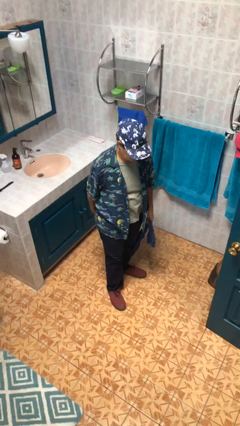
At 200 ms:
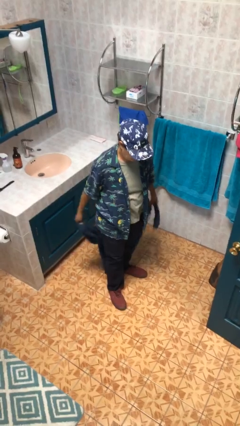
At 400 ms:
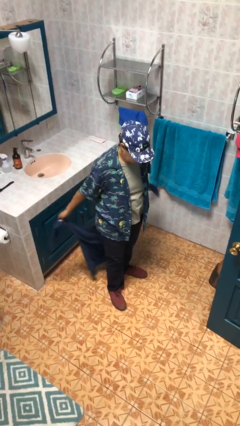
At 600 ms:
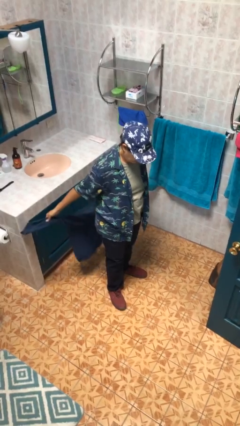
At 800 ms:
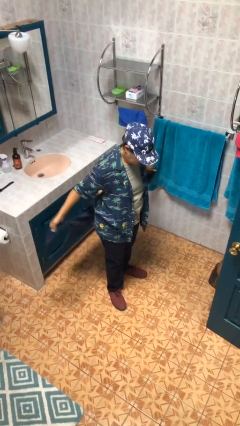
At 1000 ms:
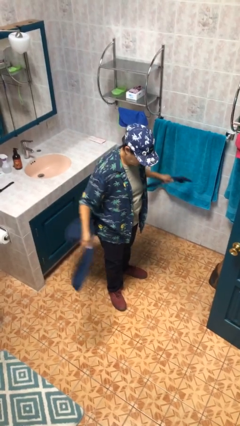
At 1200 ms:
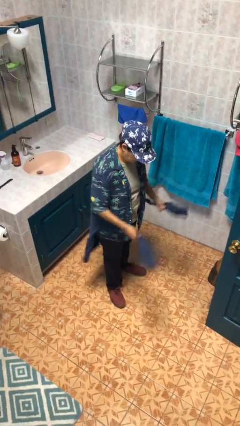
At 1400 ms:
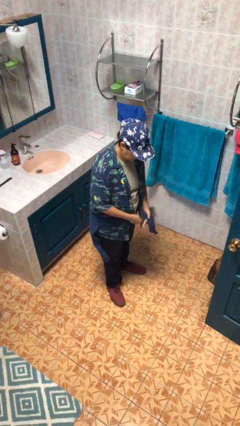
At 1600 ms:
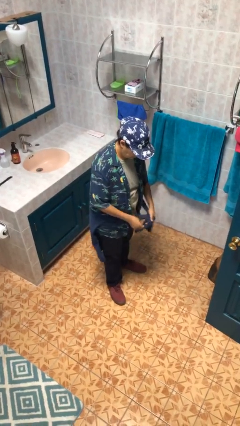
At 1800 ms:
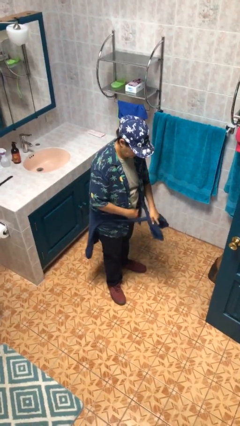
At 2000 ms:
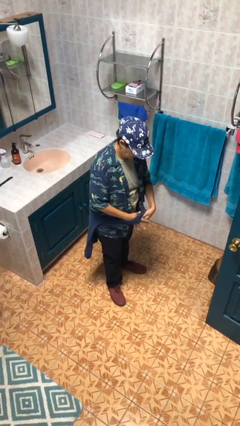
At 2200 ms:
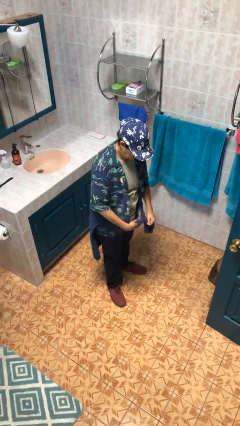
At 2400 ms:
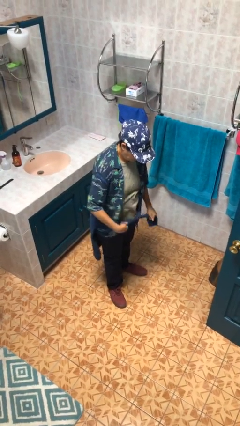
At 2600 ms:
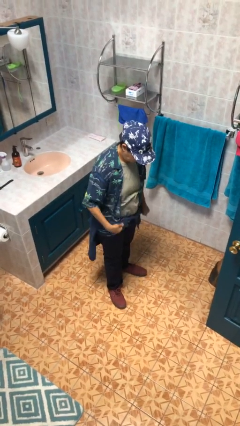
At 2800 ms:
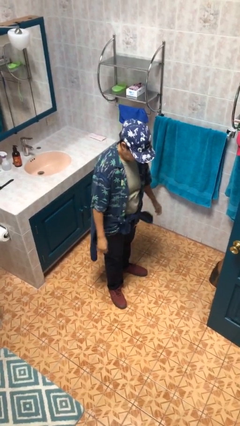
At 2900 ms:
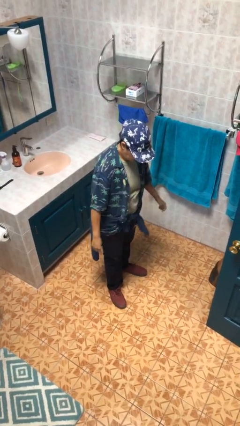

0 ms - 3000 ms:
person ties jacket around waist

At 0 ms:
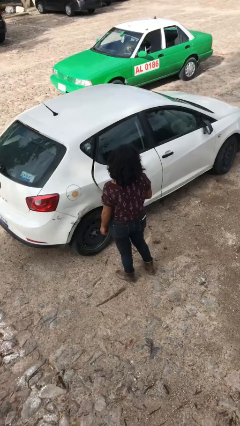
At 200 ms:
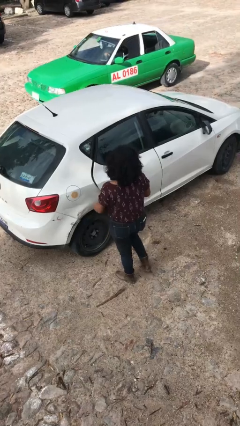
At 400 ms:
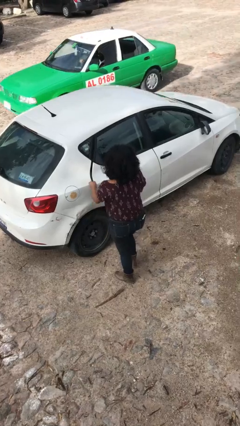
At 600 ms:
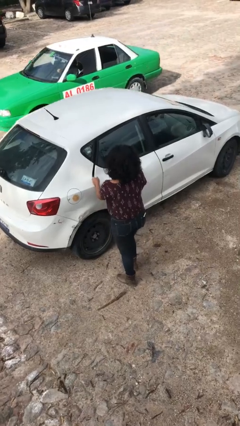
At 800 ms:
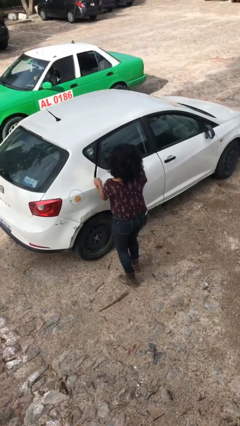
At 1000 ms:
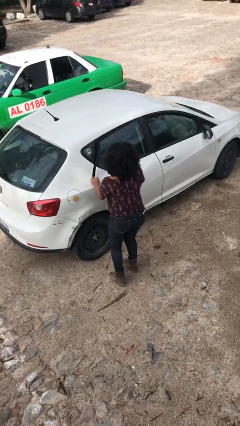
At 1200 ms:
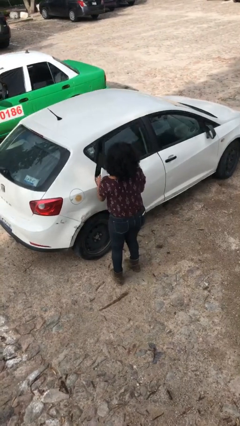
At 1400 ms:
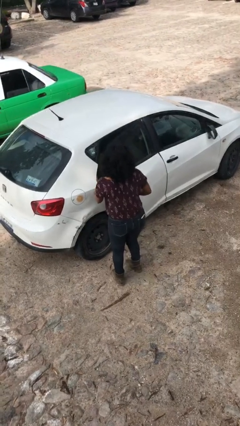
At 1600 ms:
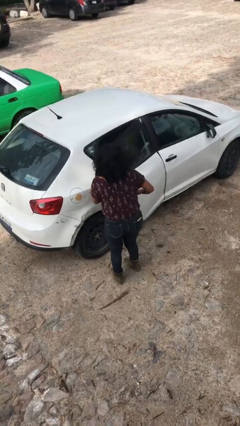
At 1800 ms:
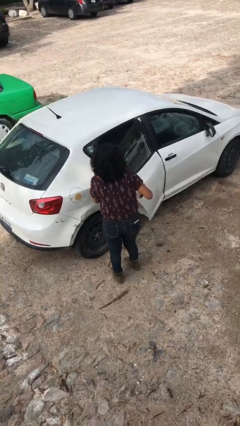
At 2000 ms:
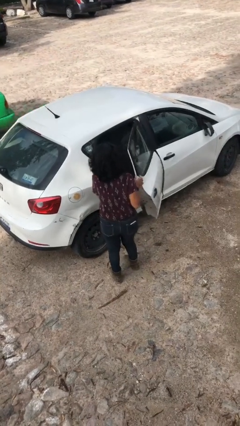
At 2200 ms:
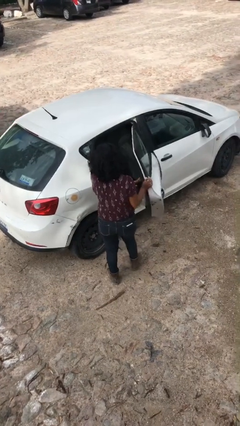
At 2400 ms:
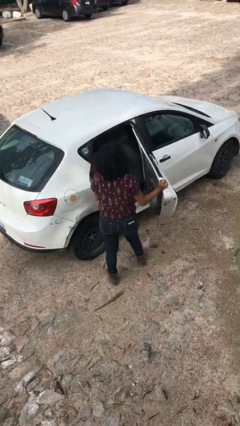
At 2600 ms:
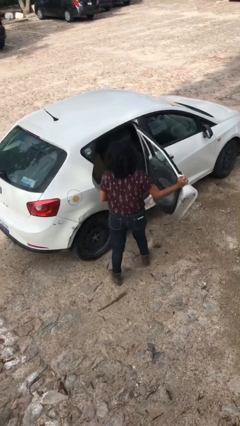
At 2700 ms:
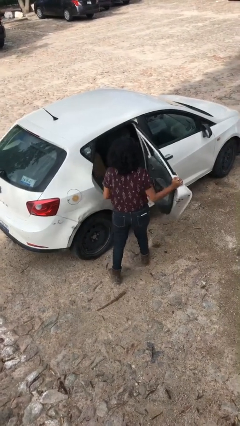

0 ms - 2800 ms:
person opens car door

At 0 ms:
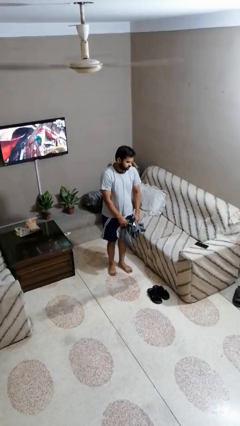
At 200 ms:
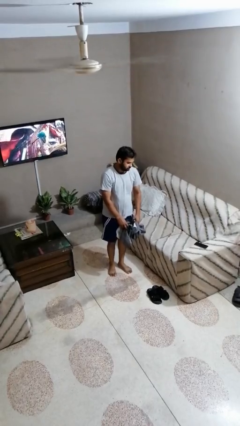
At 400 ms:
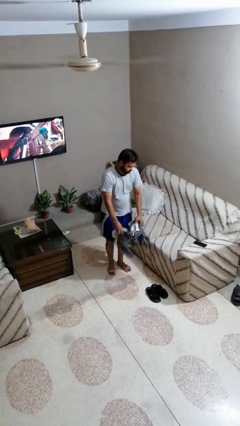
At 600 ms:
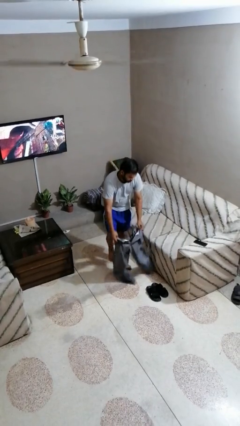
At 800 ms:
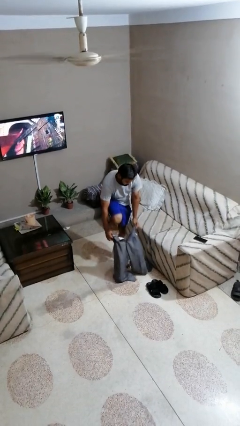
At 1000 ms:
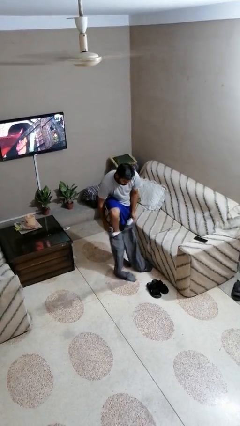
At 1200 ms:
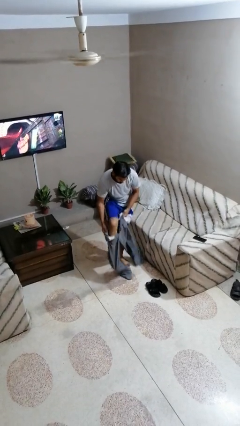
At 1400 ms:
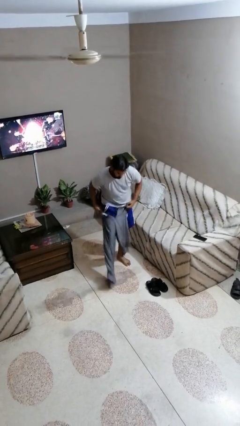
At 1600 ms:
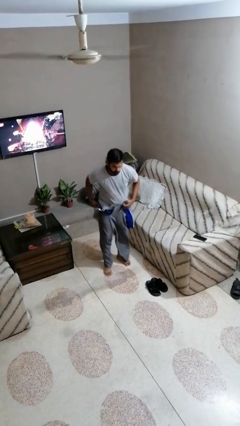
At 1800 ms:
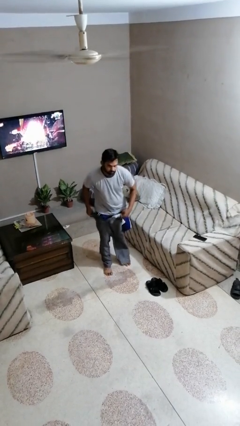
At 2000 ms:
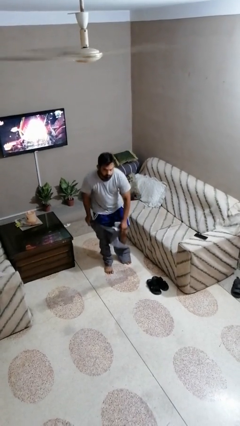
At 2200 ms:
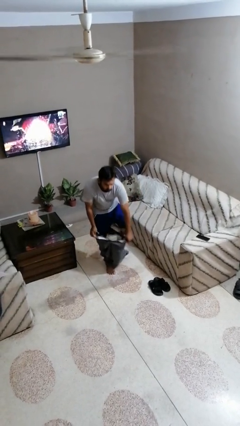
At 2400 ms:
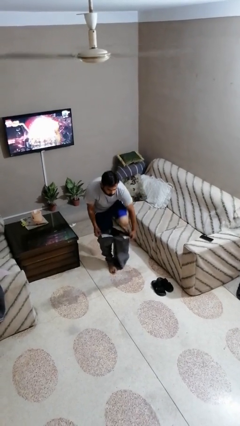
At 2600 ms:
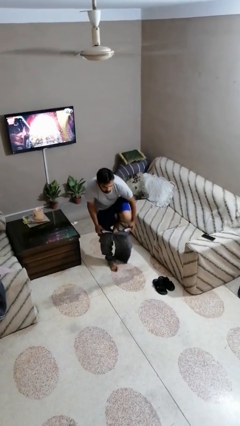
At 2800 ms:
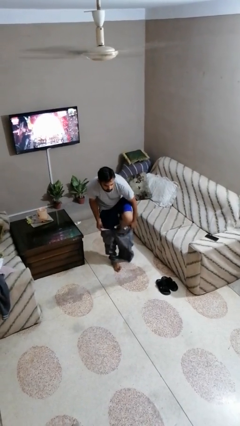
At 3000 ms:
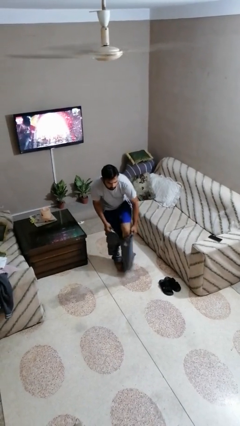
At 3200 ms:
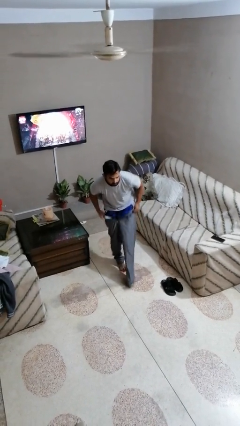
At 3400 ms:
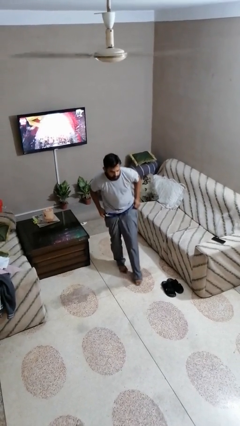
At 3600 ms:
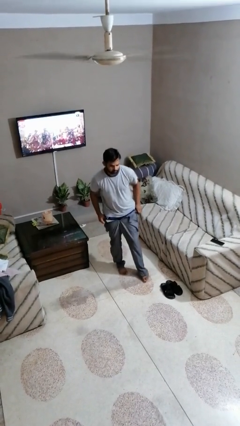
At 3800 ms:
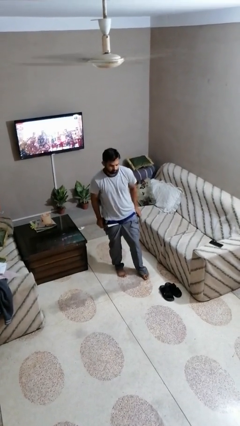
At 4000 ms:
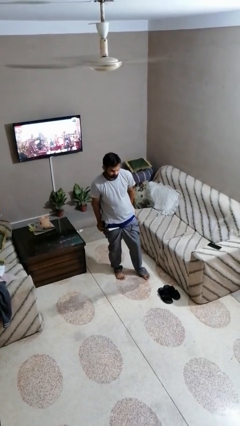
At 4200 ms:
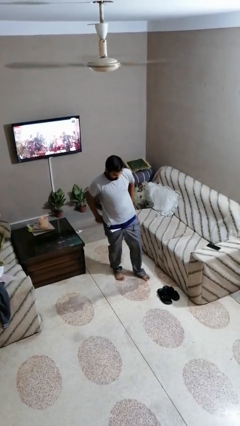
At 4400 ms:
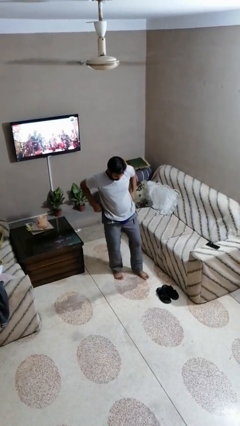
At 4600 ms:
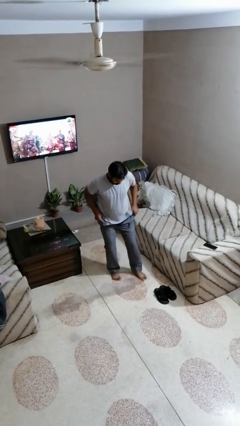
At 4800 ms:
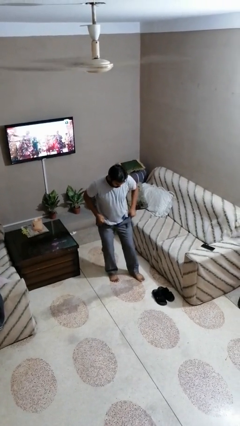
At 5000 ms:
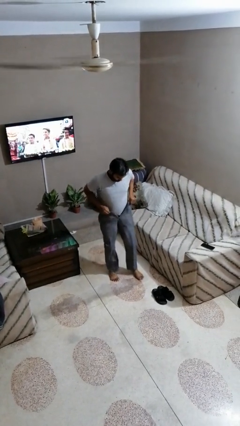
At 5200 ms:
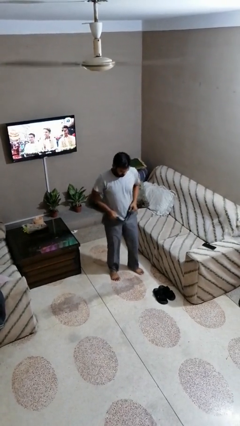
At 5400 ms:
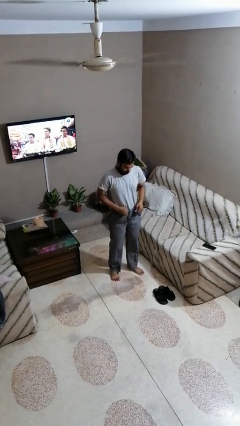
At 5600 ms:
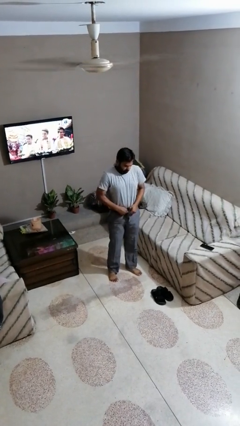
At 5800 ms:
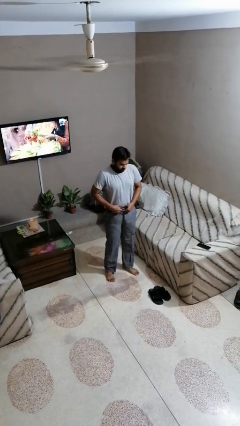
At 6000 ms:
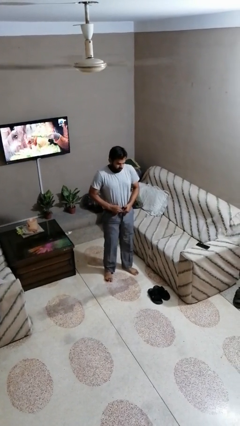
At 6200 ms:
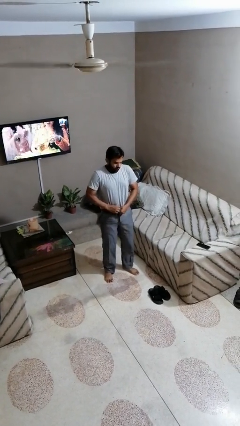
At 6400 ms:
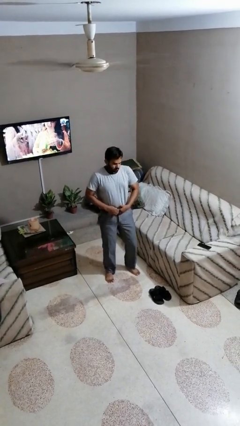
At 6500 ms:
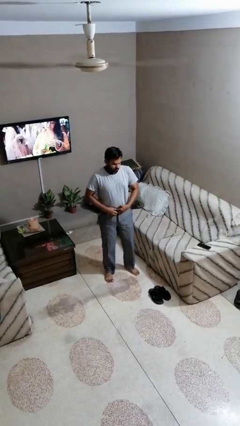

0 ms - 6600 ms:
person puts on pants

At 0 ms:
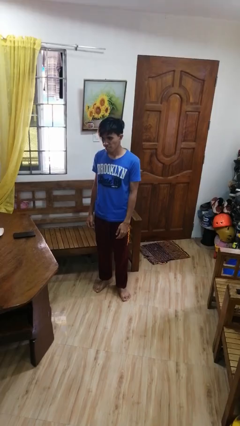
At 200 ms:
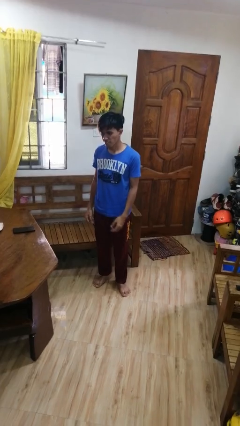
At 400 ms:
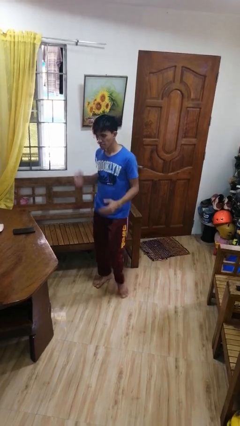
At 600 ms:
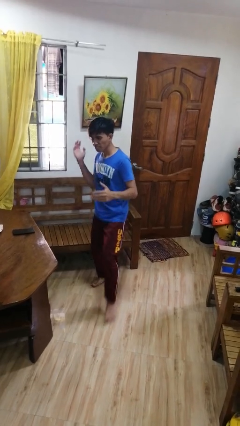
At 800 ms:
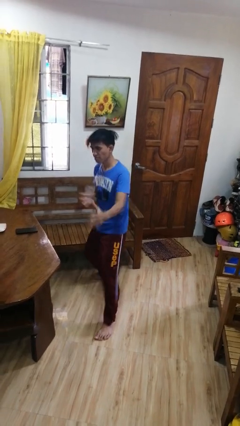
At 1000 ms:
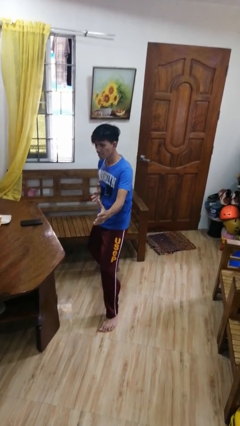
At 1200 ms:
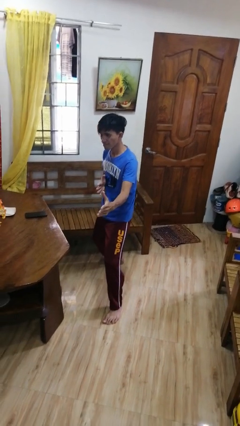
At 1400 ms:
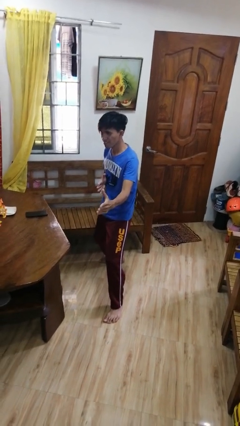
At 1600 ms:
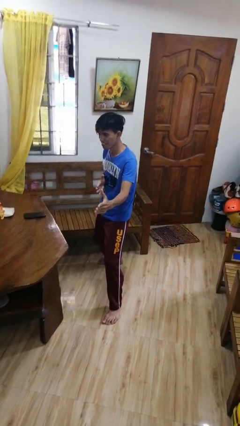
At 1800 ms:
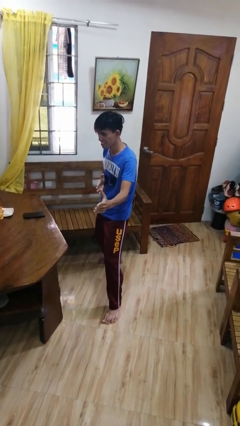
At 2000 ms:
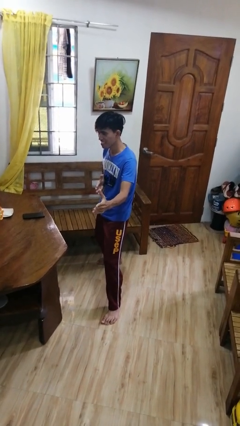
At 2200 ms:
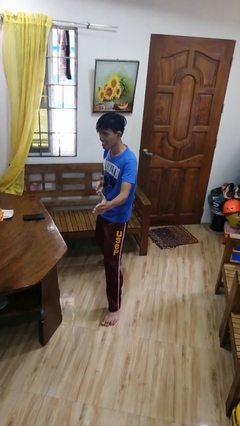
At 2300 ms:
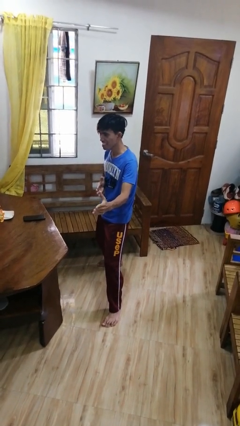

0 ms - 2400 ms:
person karate chop

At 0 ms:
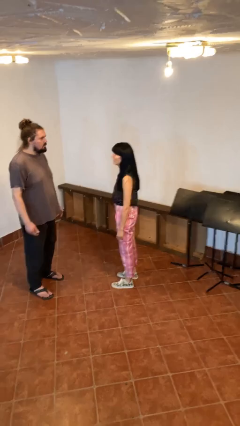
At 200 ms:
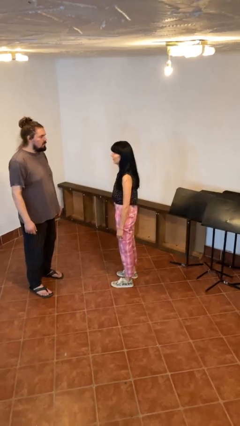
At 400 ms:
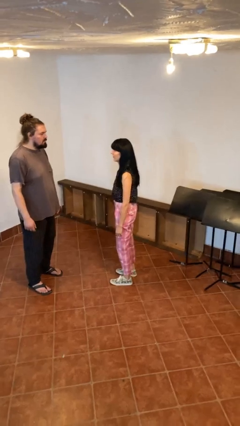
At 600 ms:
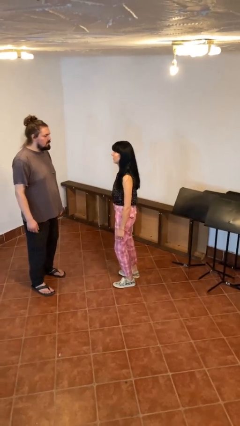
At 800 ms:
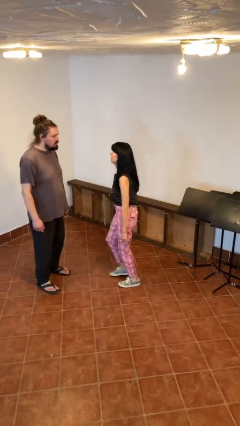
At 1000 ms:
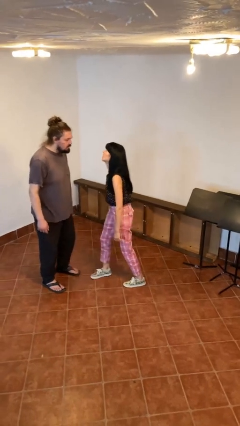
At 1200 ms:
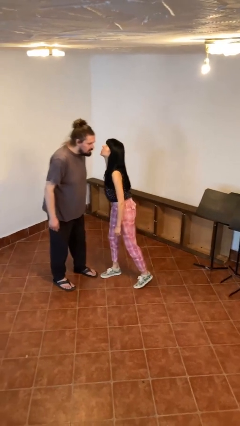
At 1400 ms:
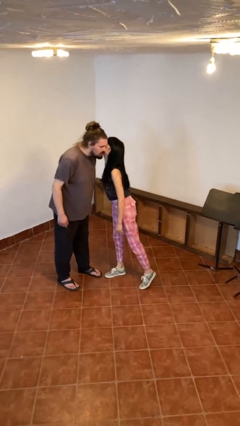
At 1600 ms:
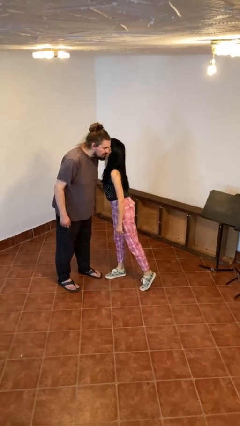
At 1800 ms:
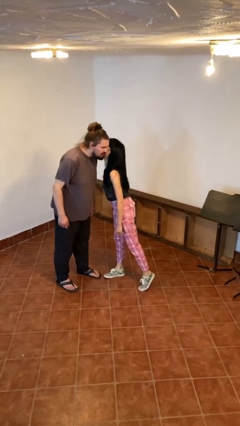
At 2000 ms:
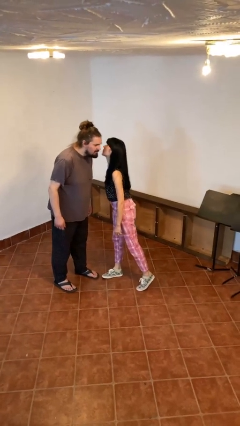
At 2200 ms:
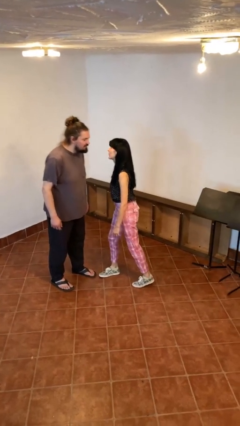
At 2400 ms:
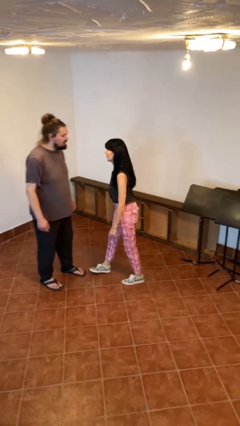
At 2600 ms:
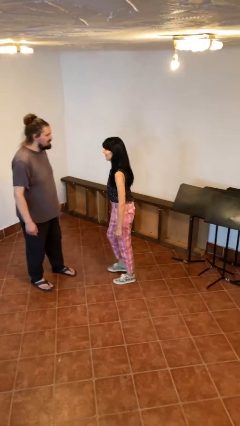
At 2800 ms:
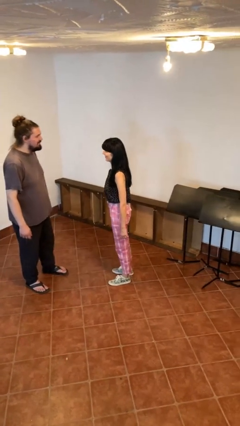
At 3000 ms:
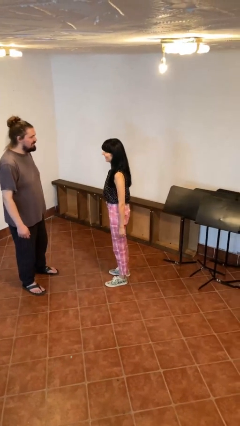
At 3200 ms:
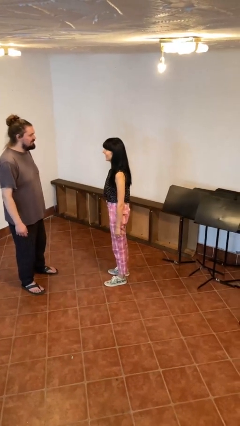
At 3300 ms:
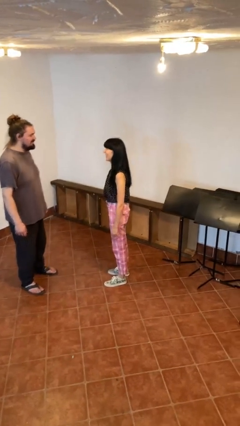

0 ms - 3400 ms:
person kisses cheek of person
